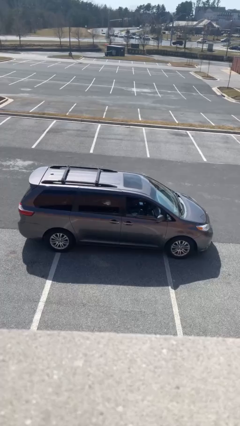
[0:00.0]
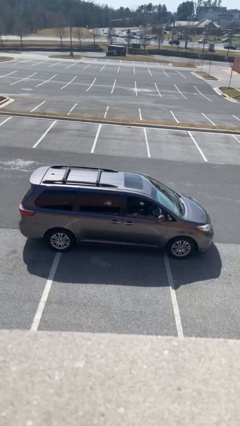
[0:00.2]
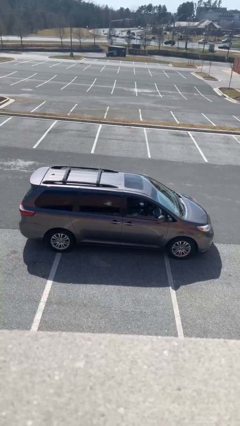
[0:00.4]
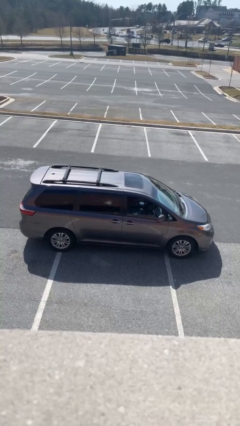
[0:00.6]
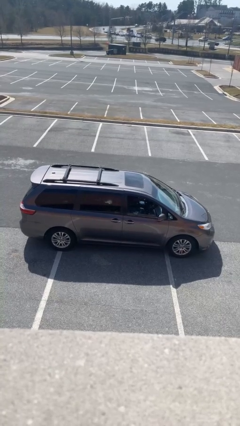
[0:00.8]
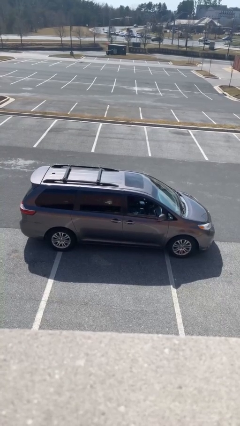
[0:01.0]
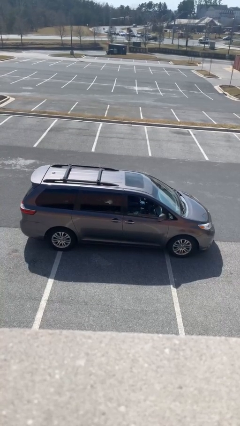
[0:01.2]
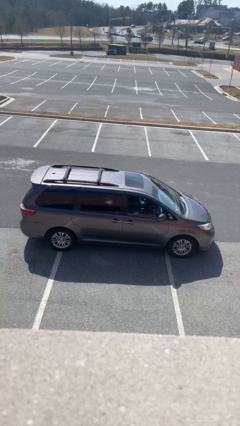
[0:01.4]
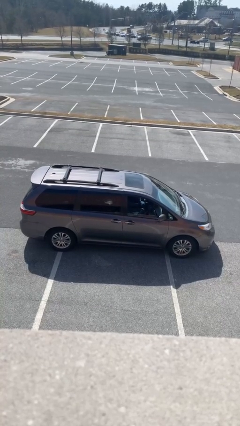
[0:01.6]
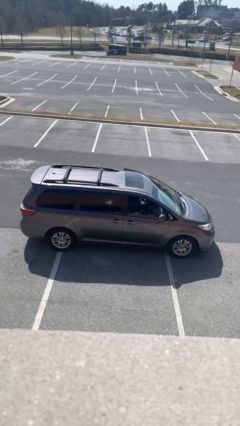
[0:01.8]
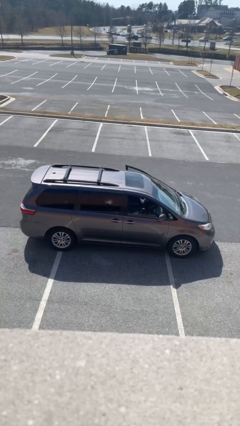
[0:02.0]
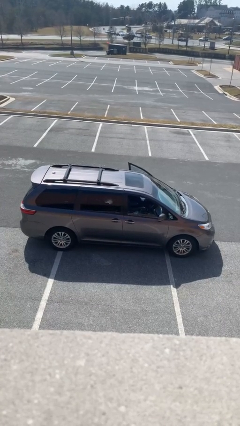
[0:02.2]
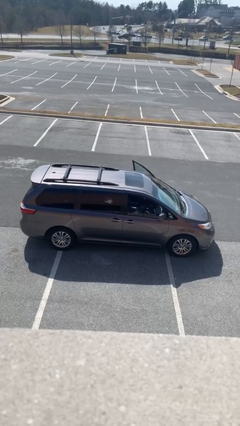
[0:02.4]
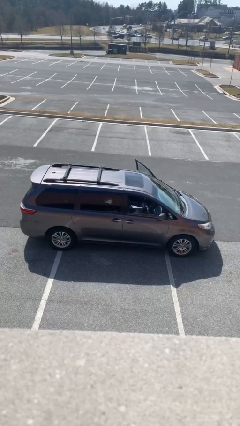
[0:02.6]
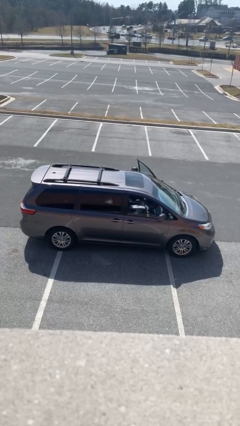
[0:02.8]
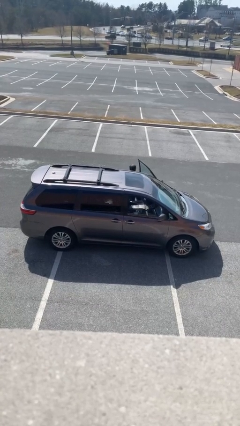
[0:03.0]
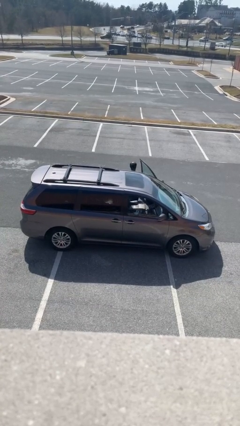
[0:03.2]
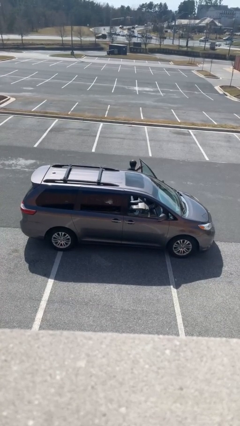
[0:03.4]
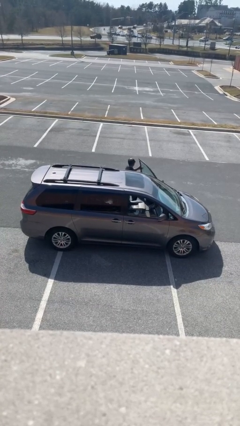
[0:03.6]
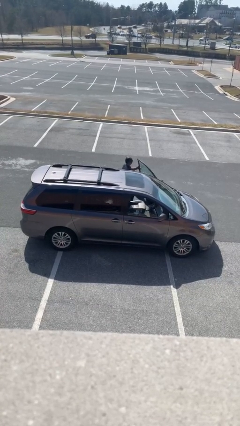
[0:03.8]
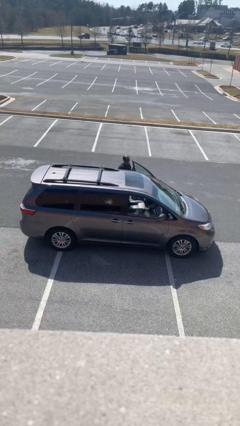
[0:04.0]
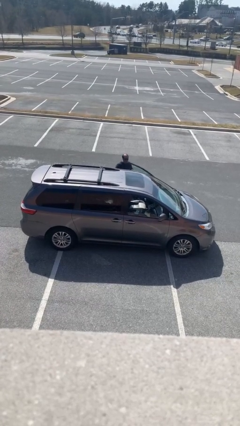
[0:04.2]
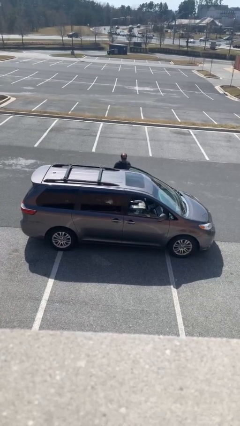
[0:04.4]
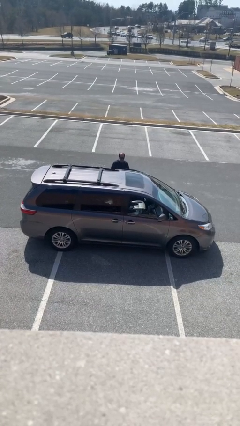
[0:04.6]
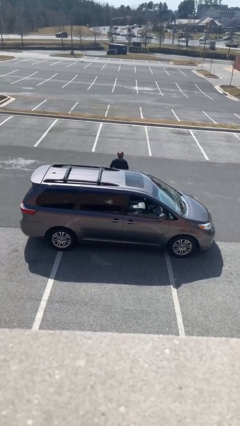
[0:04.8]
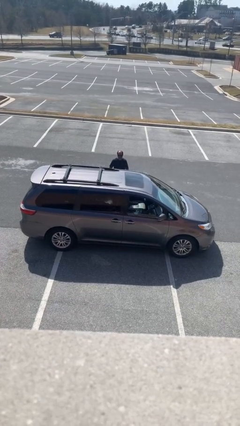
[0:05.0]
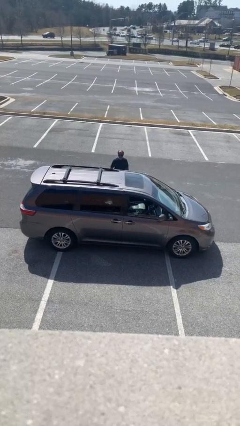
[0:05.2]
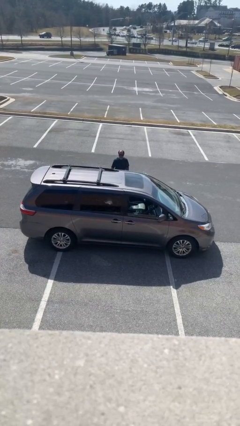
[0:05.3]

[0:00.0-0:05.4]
car drops off person

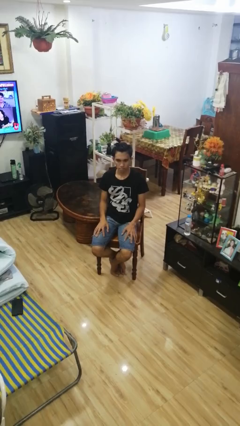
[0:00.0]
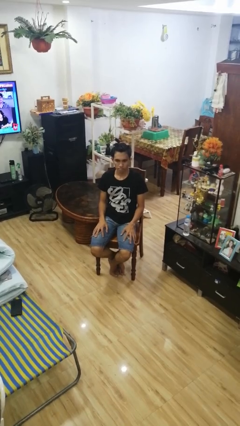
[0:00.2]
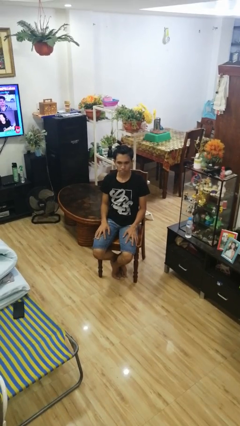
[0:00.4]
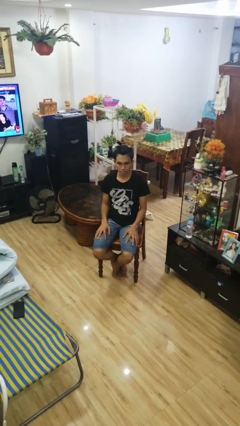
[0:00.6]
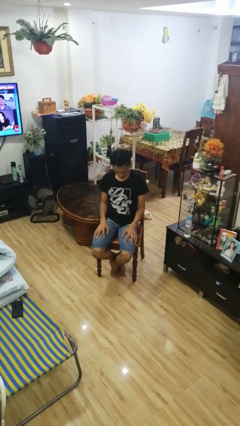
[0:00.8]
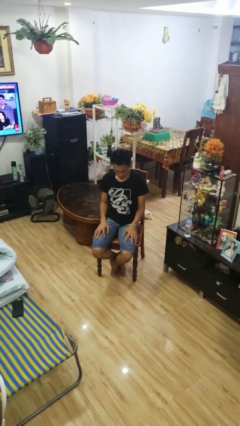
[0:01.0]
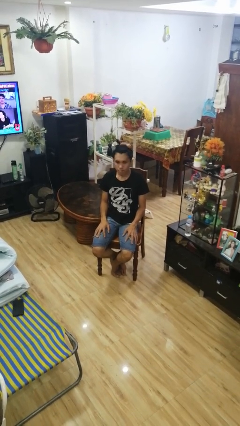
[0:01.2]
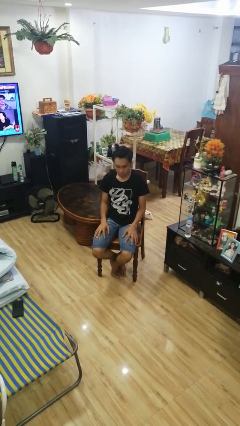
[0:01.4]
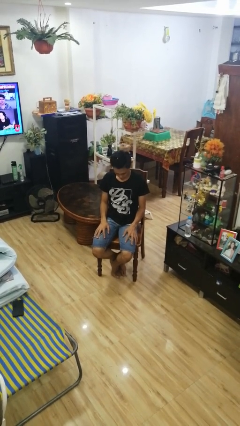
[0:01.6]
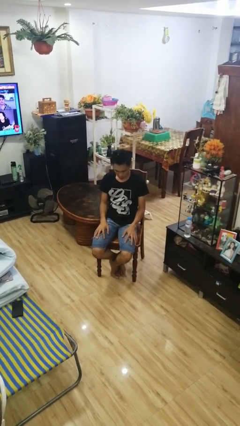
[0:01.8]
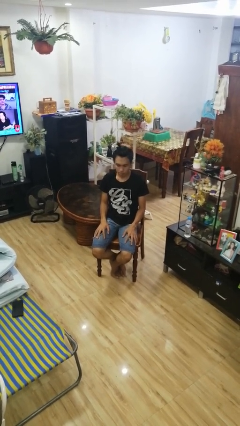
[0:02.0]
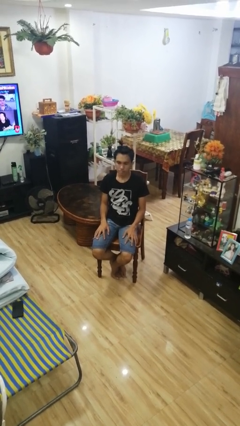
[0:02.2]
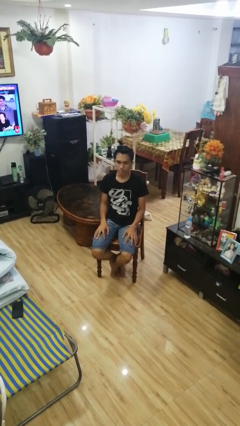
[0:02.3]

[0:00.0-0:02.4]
person nods head

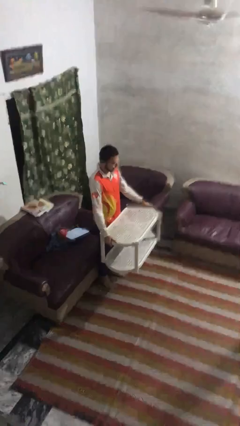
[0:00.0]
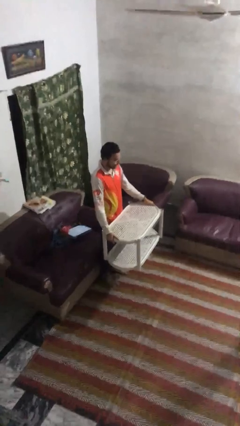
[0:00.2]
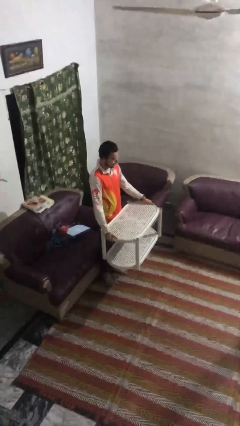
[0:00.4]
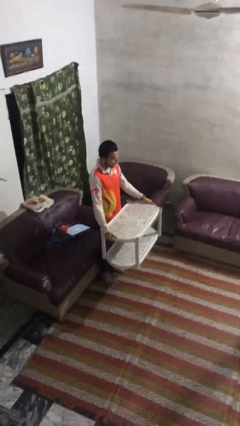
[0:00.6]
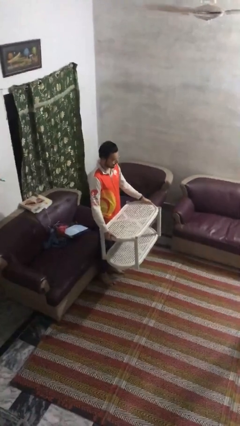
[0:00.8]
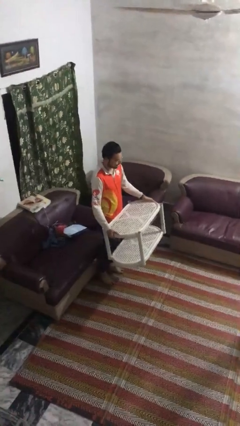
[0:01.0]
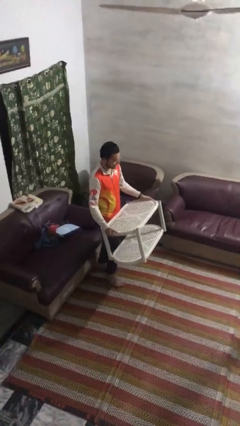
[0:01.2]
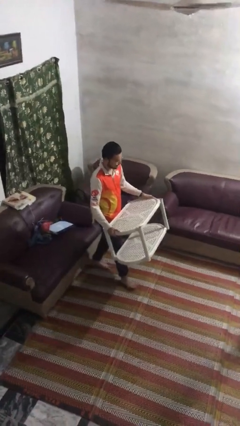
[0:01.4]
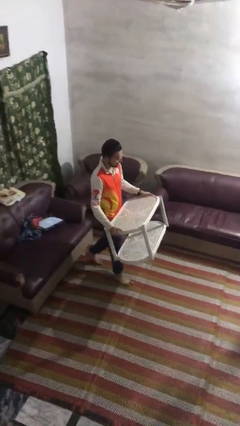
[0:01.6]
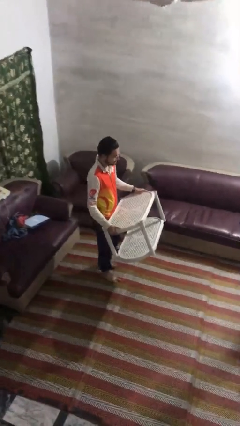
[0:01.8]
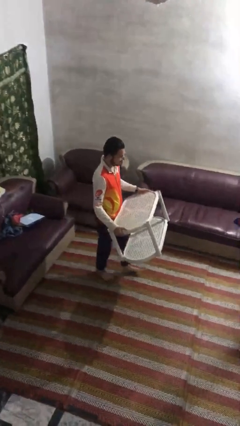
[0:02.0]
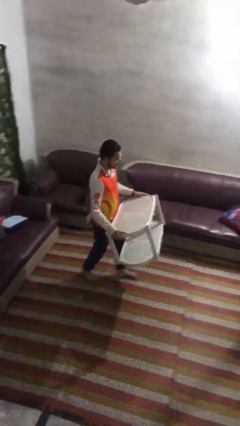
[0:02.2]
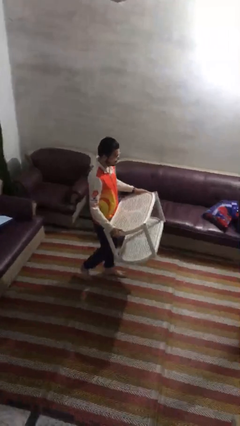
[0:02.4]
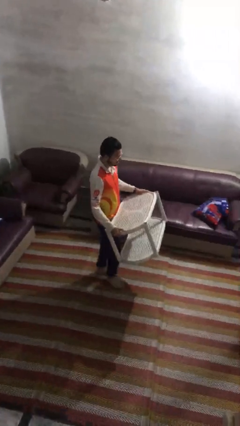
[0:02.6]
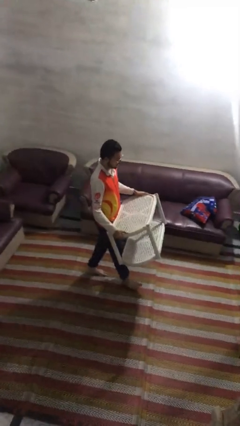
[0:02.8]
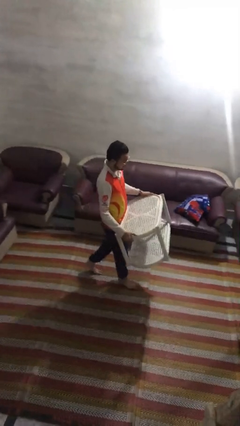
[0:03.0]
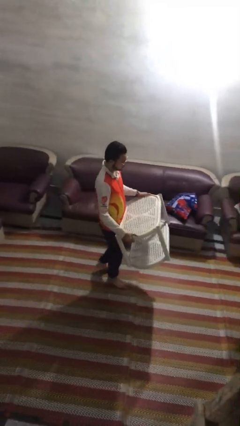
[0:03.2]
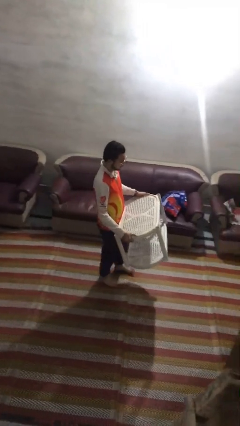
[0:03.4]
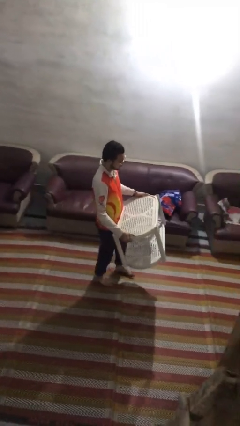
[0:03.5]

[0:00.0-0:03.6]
person carries furniture

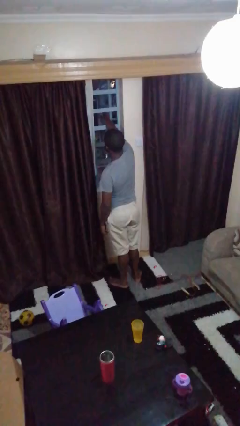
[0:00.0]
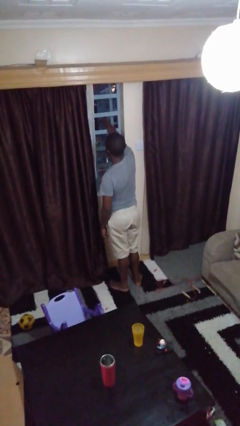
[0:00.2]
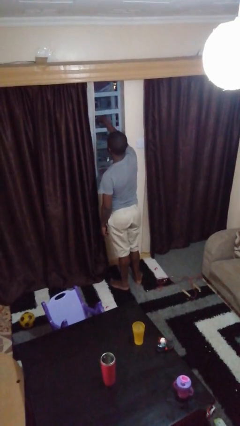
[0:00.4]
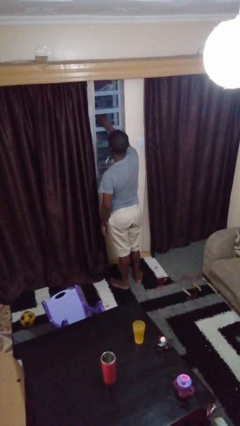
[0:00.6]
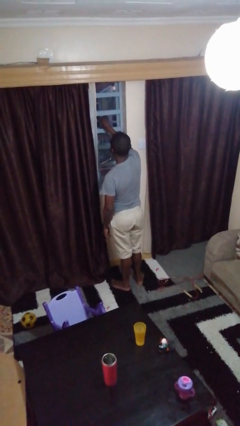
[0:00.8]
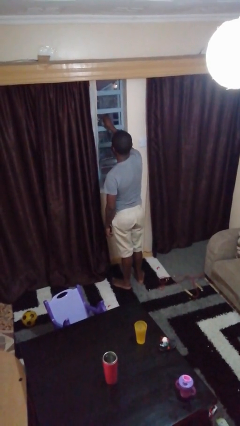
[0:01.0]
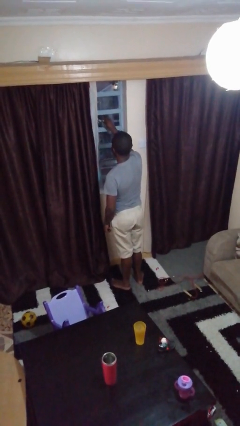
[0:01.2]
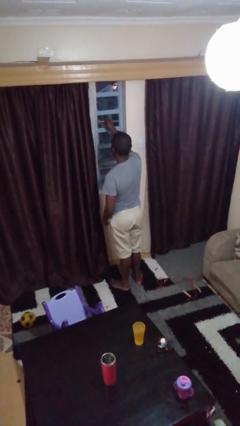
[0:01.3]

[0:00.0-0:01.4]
person closes home window

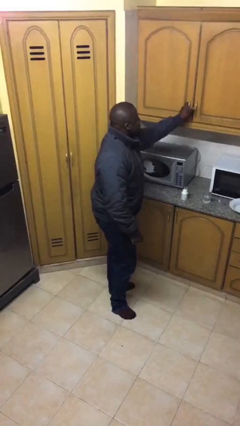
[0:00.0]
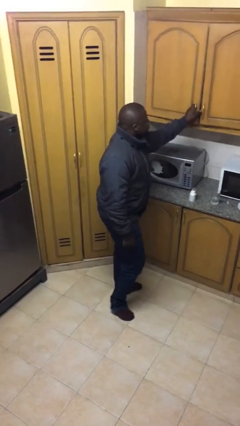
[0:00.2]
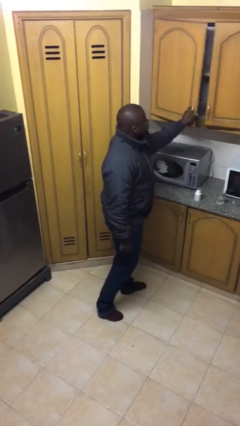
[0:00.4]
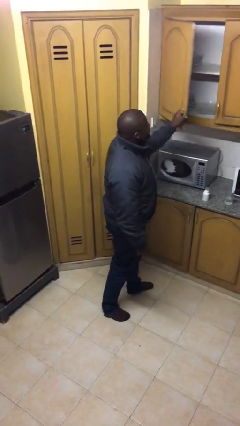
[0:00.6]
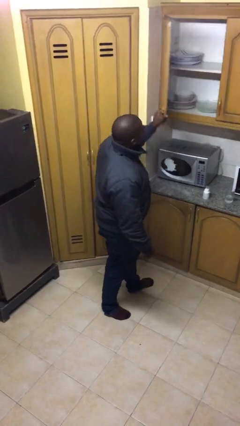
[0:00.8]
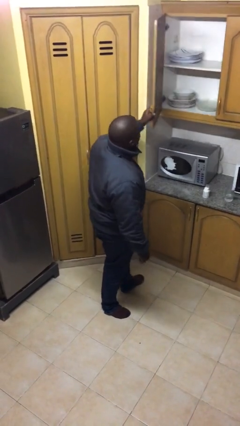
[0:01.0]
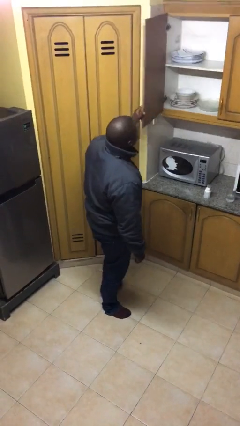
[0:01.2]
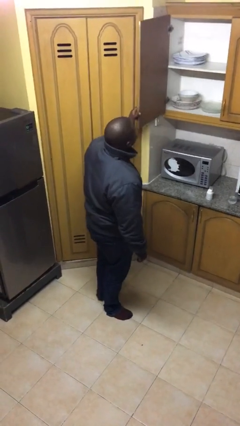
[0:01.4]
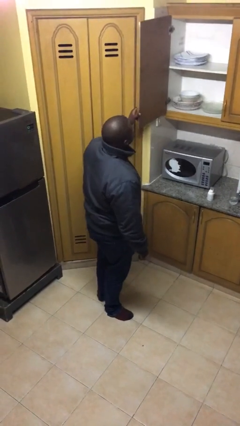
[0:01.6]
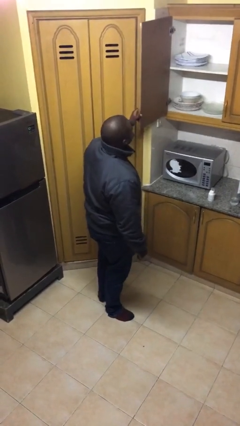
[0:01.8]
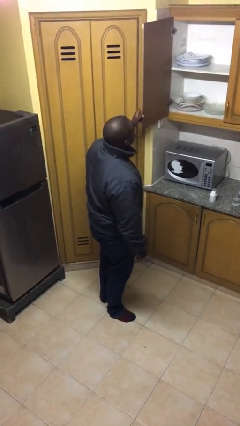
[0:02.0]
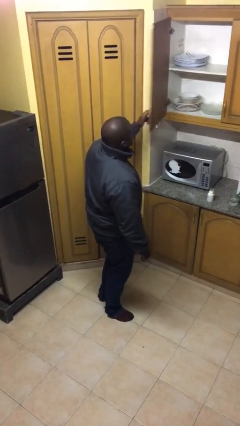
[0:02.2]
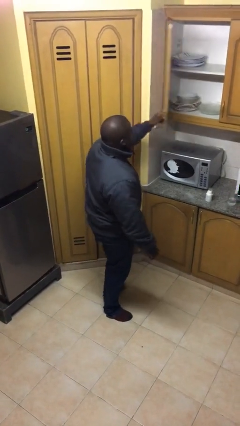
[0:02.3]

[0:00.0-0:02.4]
person closes cabinet

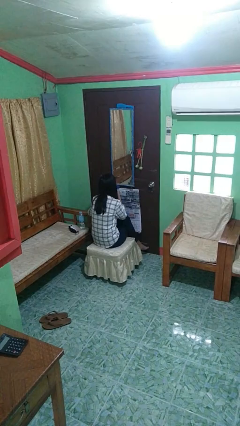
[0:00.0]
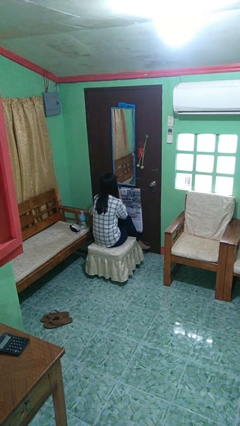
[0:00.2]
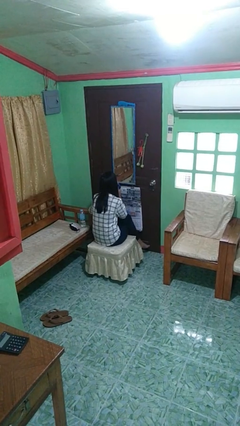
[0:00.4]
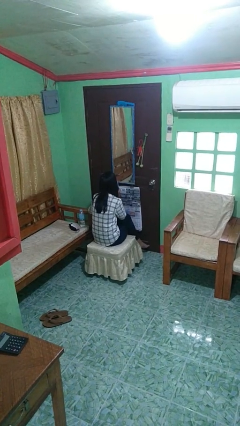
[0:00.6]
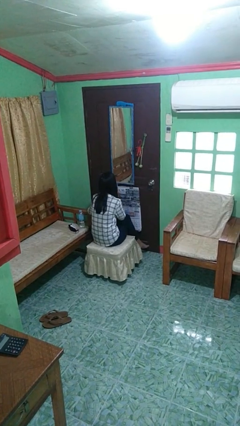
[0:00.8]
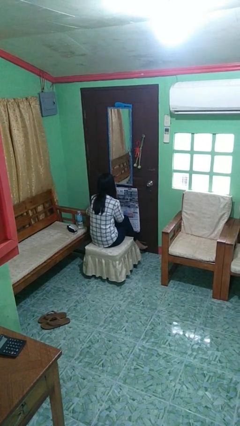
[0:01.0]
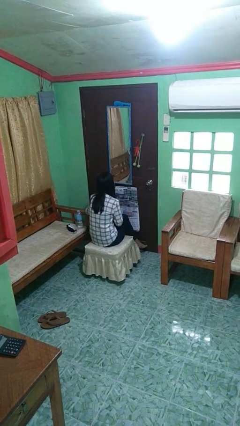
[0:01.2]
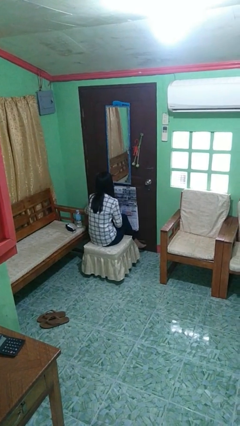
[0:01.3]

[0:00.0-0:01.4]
person wipes mouth with napkin

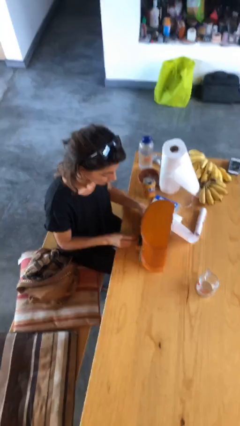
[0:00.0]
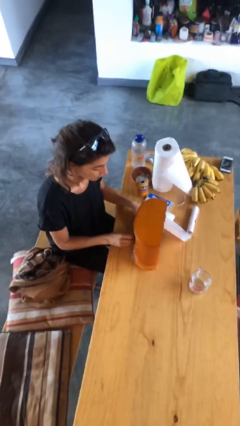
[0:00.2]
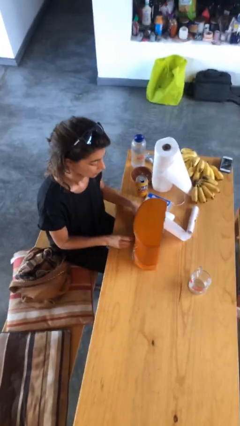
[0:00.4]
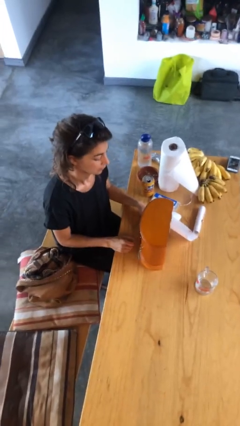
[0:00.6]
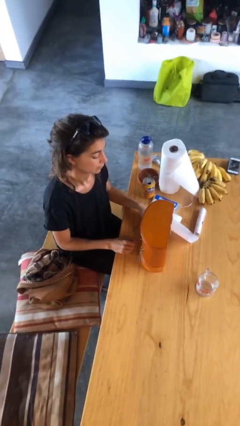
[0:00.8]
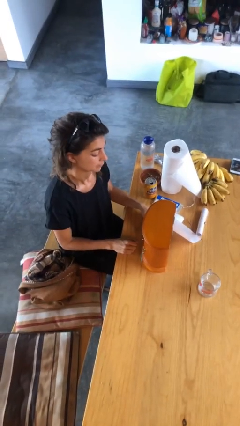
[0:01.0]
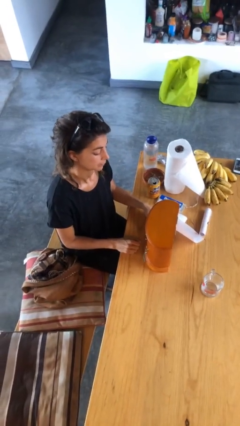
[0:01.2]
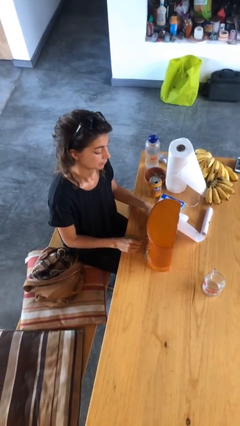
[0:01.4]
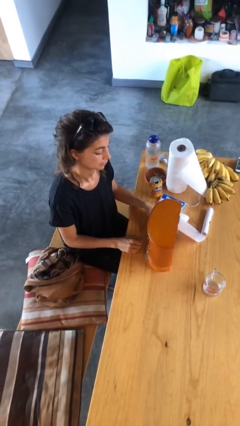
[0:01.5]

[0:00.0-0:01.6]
person closes jewelry box
